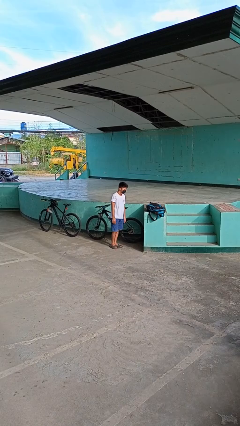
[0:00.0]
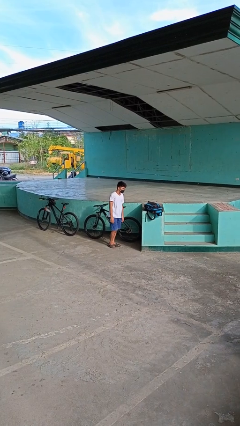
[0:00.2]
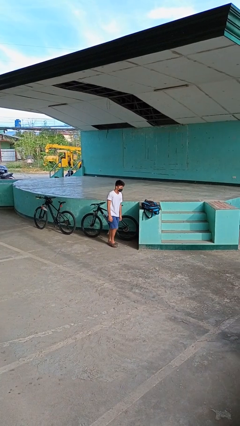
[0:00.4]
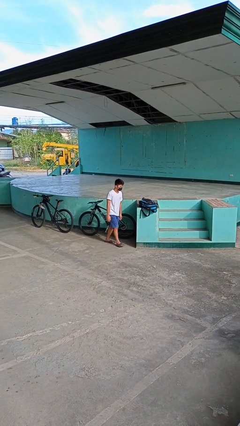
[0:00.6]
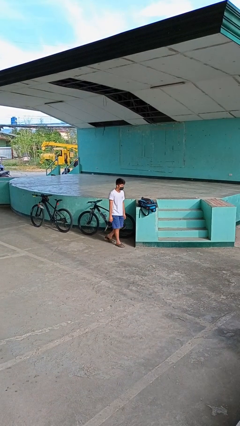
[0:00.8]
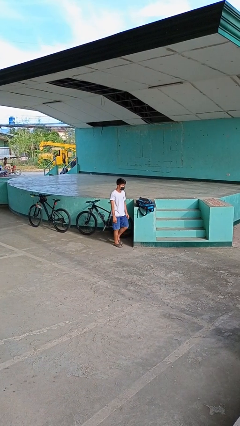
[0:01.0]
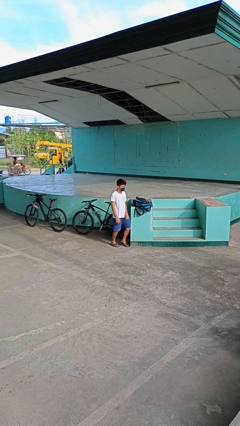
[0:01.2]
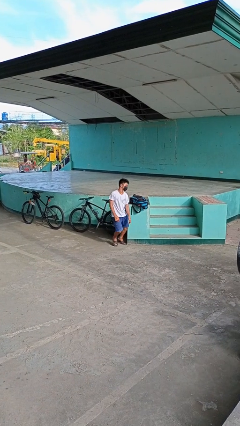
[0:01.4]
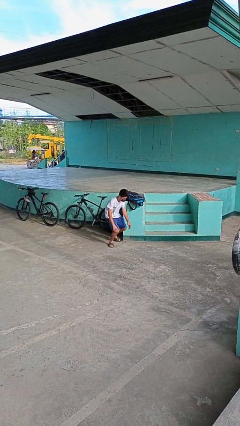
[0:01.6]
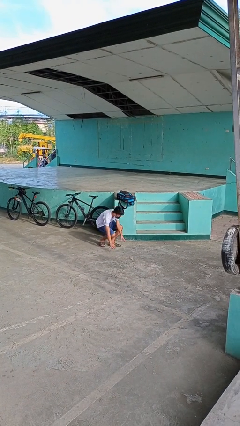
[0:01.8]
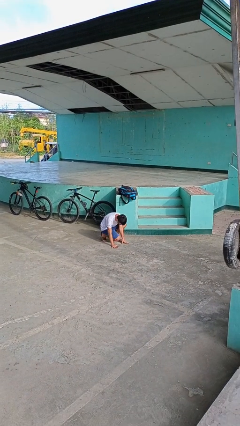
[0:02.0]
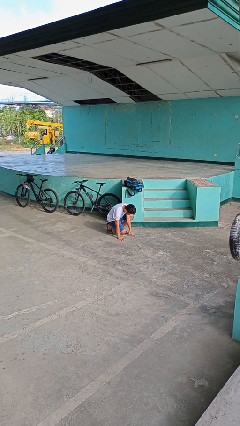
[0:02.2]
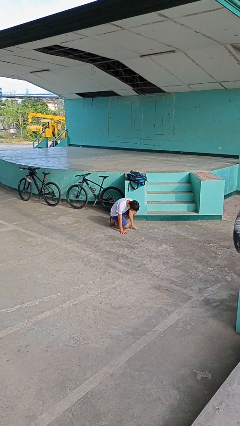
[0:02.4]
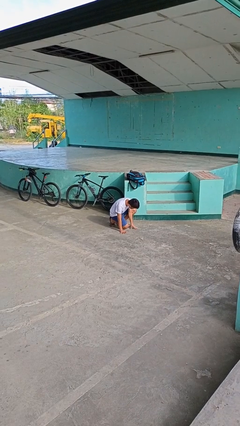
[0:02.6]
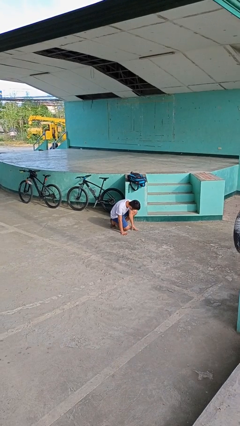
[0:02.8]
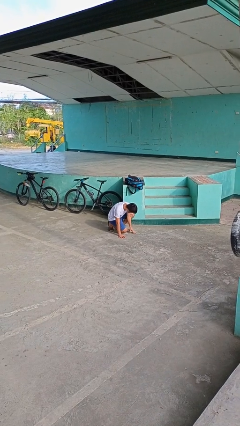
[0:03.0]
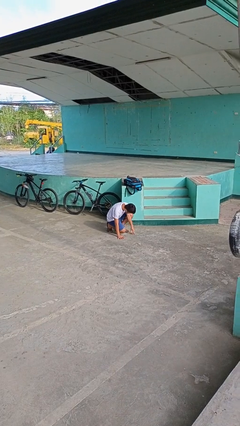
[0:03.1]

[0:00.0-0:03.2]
person trips on object on floor

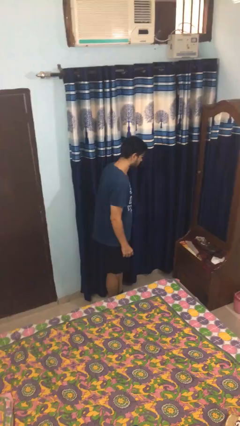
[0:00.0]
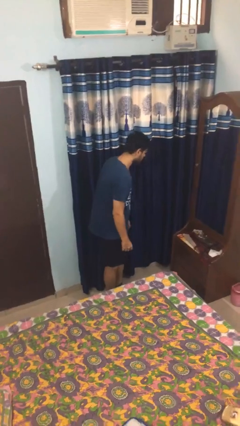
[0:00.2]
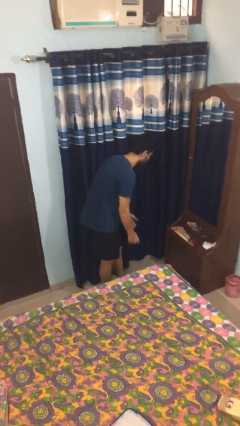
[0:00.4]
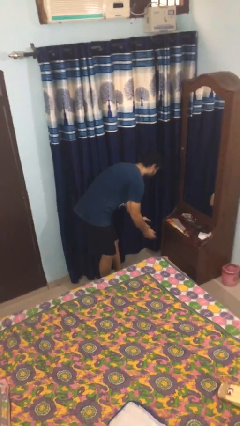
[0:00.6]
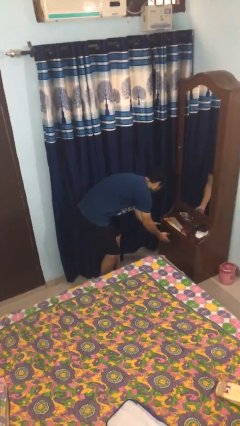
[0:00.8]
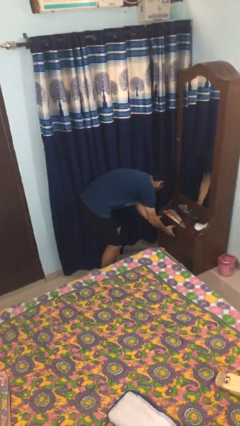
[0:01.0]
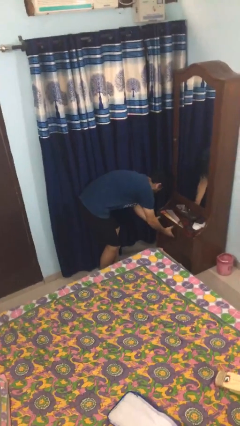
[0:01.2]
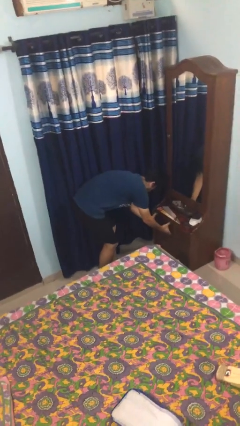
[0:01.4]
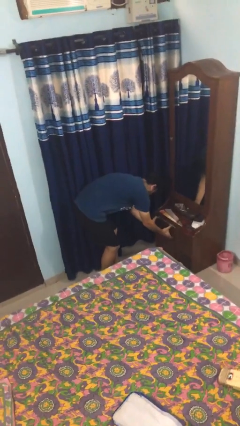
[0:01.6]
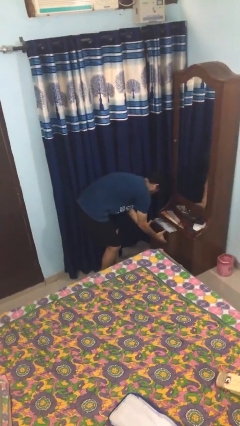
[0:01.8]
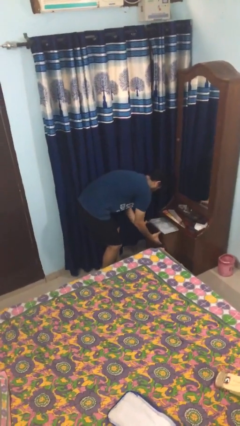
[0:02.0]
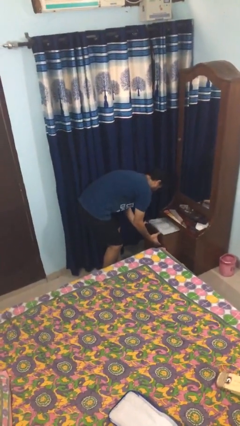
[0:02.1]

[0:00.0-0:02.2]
person opens dresser drawer

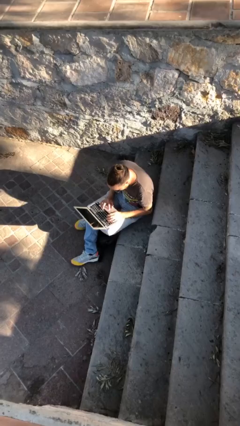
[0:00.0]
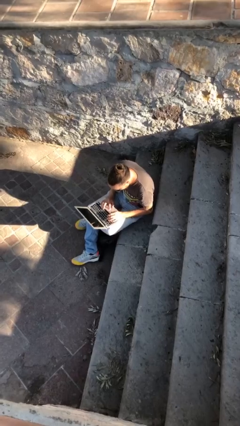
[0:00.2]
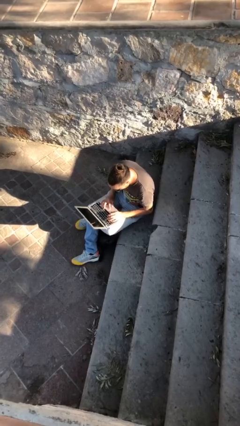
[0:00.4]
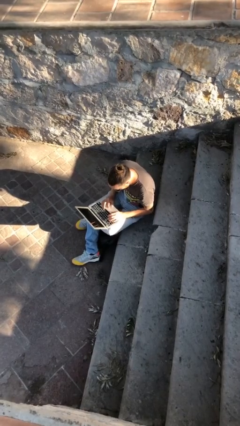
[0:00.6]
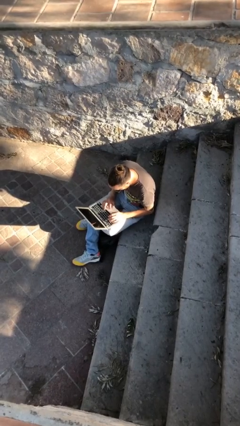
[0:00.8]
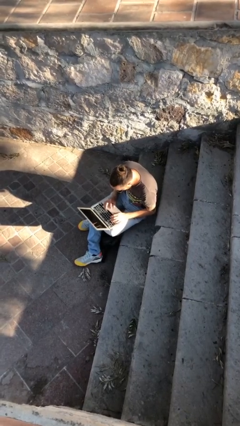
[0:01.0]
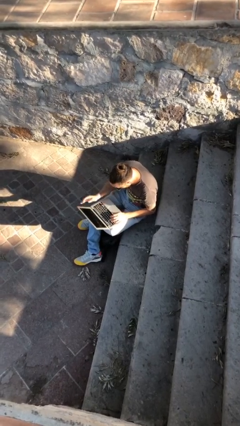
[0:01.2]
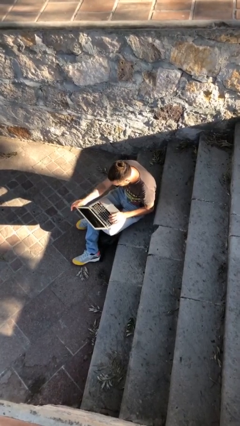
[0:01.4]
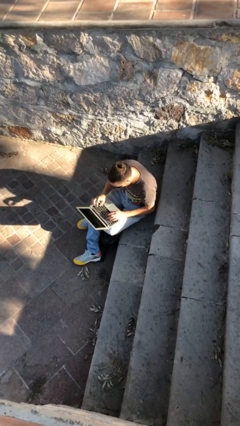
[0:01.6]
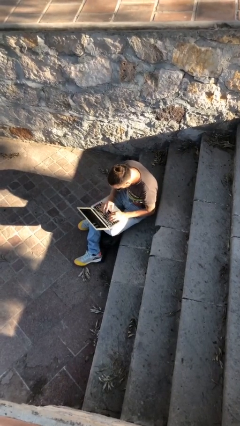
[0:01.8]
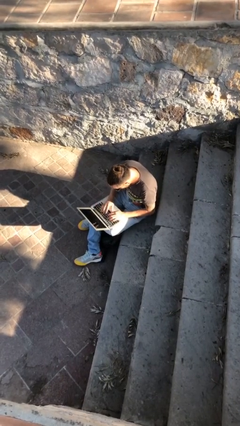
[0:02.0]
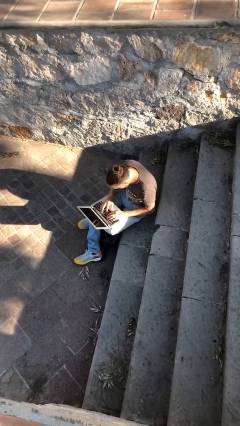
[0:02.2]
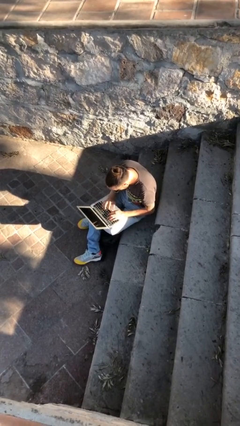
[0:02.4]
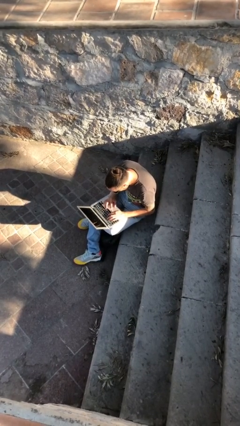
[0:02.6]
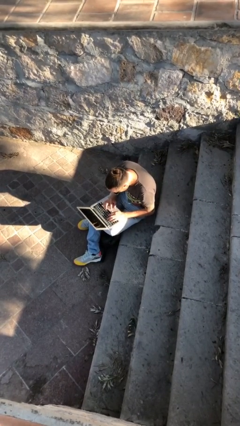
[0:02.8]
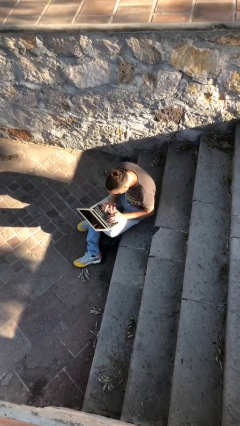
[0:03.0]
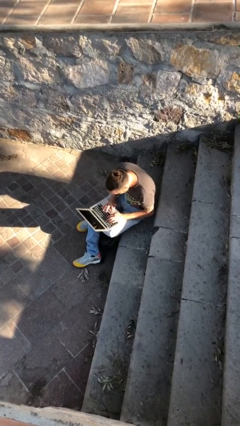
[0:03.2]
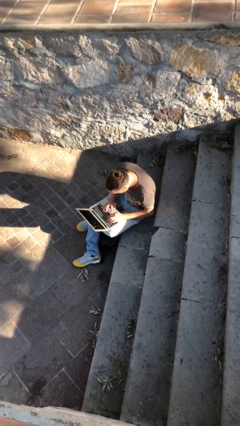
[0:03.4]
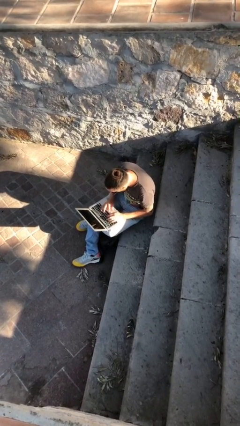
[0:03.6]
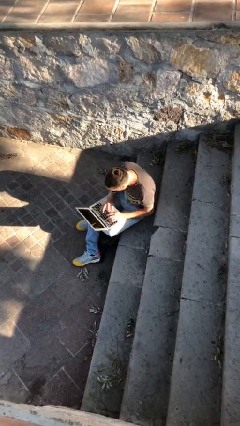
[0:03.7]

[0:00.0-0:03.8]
person interacts with laptop

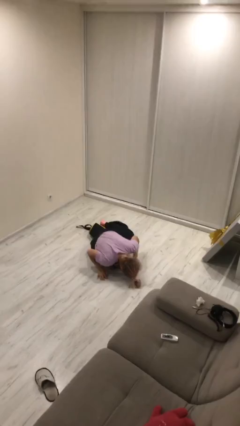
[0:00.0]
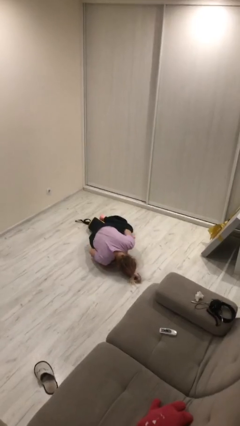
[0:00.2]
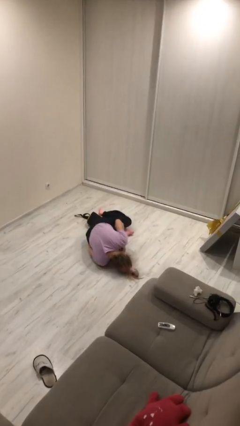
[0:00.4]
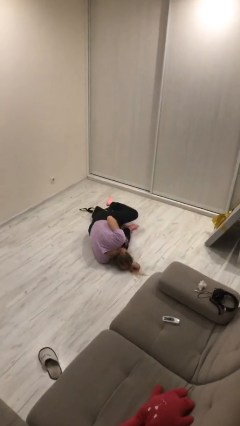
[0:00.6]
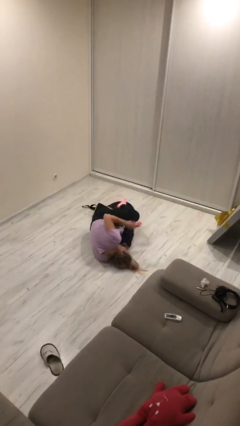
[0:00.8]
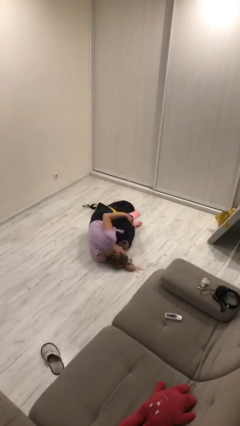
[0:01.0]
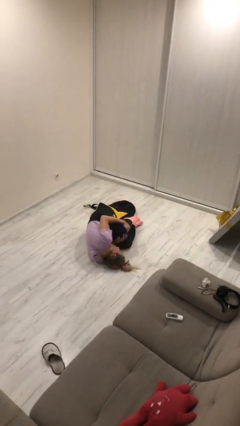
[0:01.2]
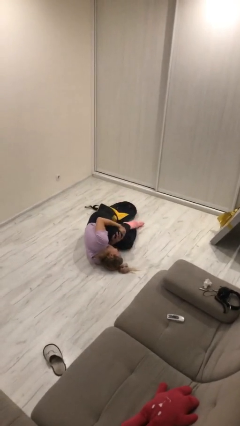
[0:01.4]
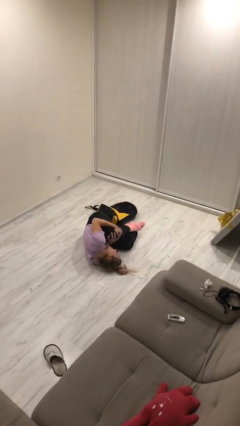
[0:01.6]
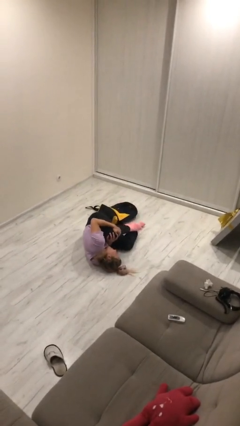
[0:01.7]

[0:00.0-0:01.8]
person lies down on floor

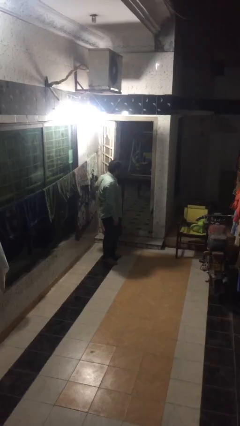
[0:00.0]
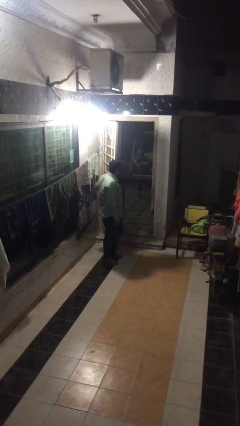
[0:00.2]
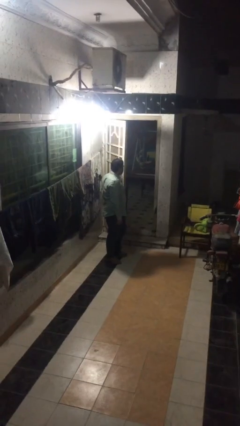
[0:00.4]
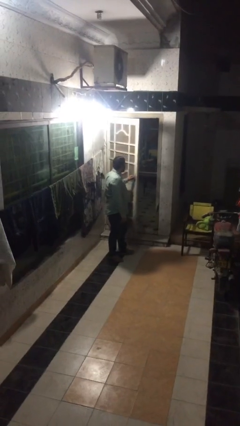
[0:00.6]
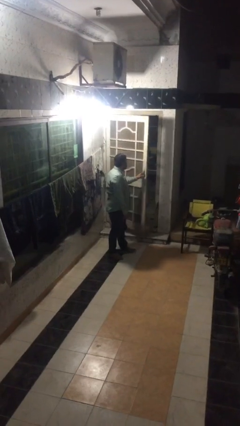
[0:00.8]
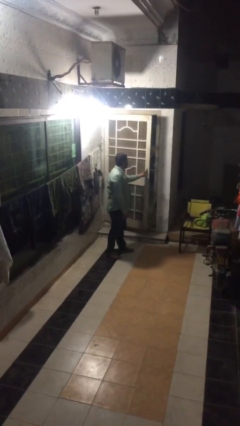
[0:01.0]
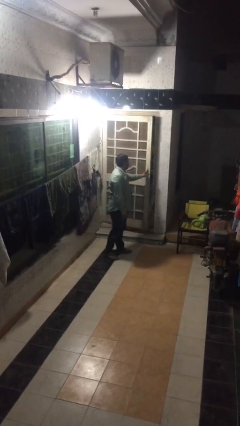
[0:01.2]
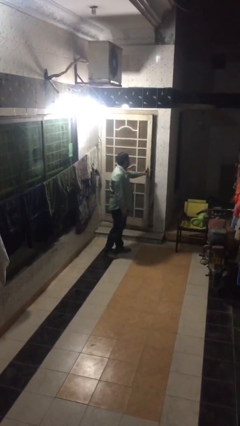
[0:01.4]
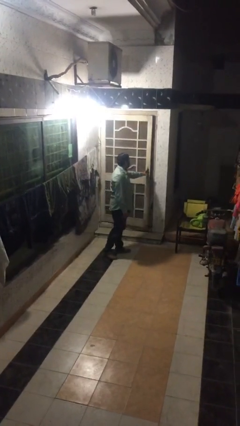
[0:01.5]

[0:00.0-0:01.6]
person closes facility door

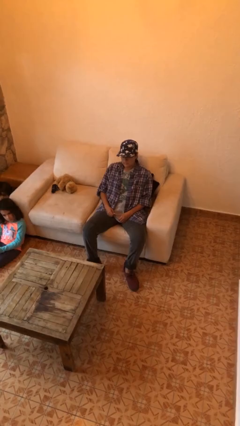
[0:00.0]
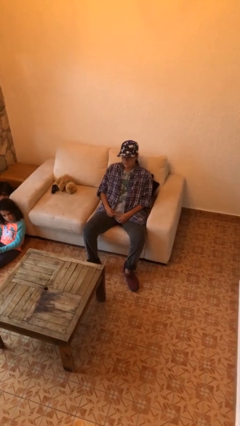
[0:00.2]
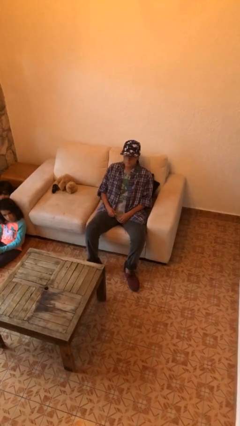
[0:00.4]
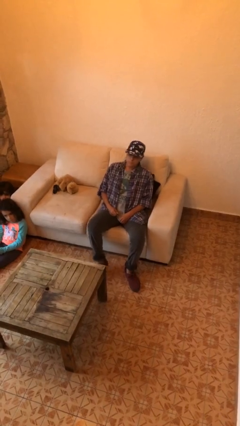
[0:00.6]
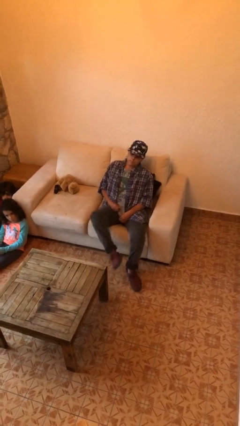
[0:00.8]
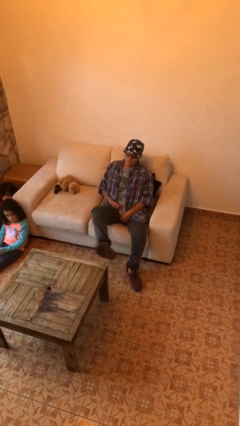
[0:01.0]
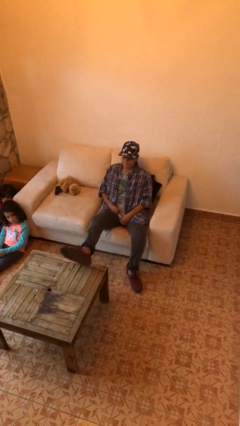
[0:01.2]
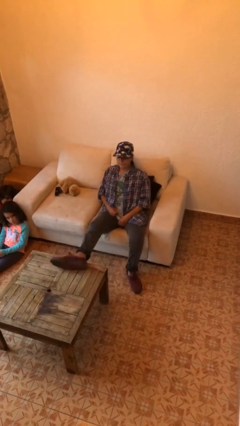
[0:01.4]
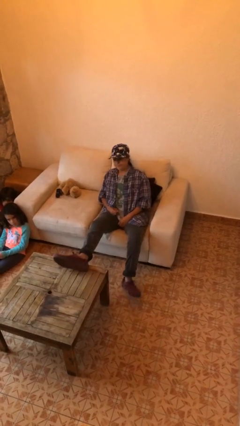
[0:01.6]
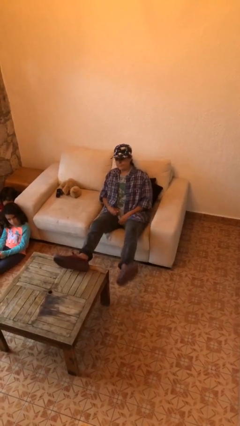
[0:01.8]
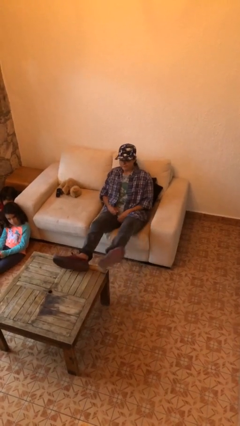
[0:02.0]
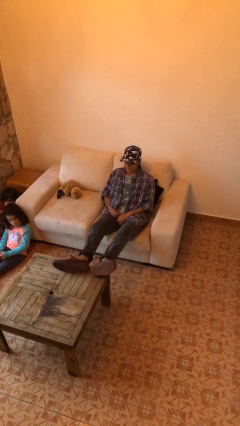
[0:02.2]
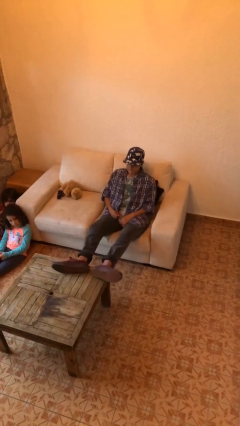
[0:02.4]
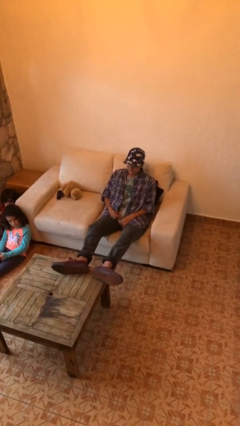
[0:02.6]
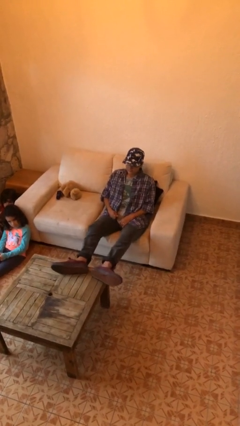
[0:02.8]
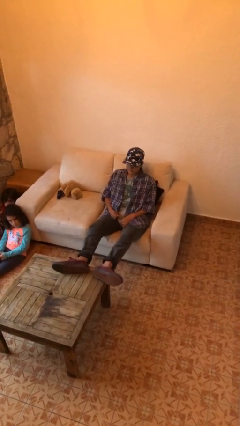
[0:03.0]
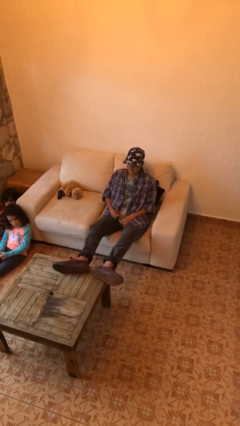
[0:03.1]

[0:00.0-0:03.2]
person puts feet up

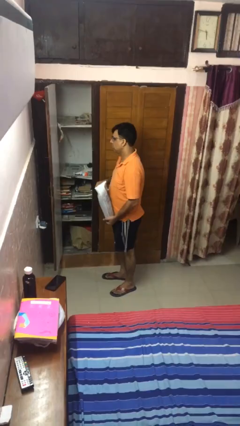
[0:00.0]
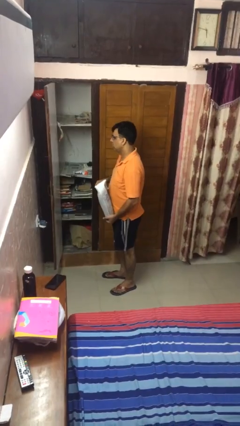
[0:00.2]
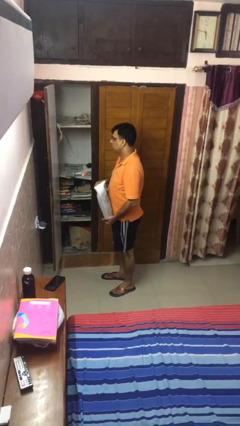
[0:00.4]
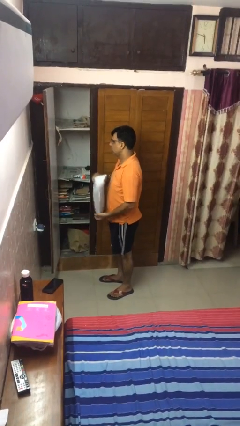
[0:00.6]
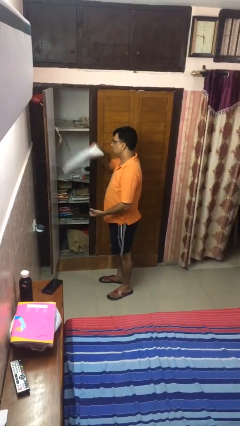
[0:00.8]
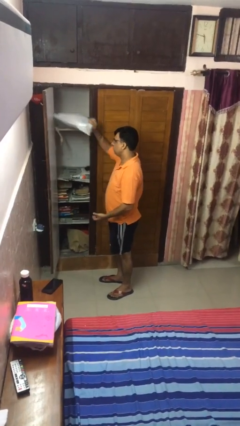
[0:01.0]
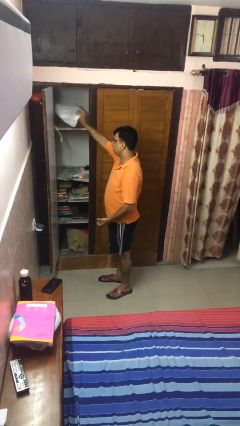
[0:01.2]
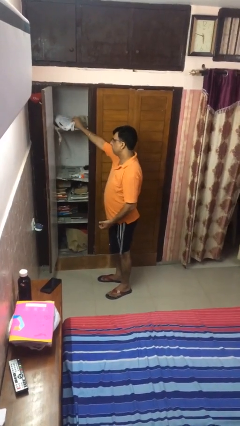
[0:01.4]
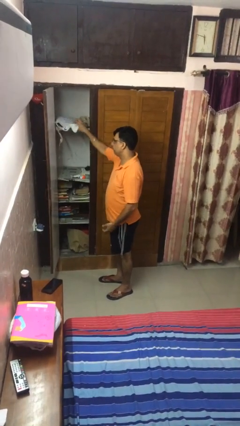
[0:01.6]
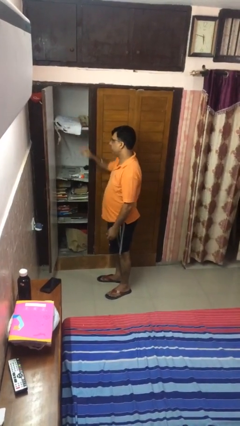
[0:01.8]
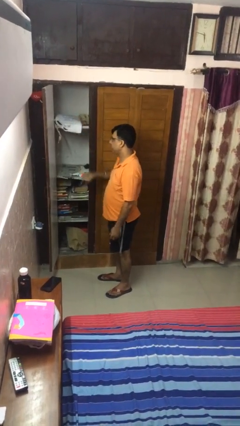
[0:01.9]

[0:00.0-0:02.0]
person puts down object on shelf
